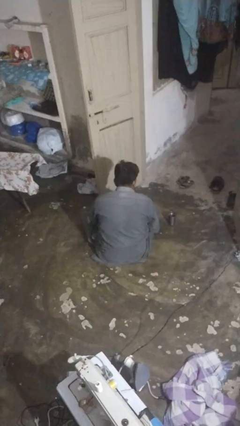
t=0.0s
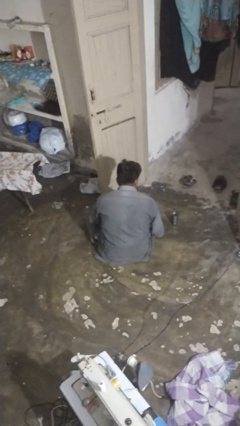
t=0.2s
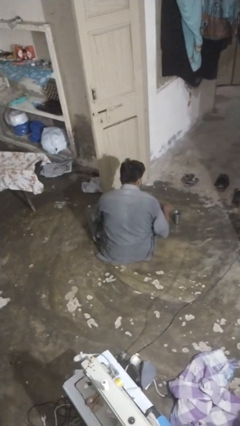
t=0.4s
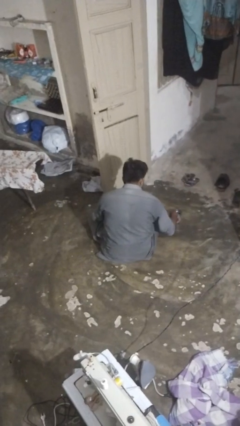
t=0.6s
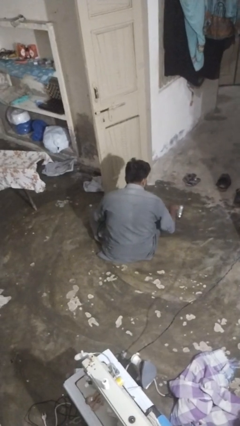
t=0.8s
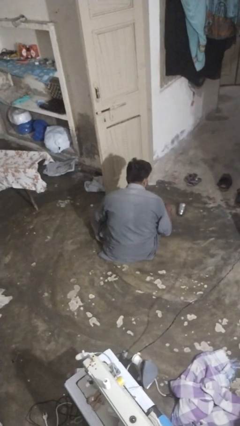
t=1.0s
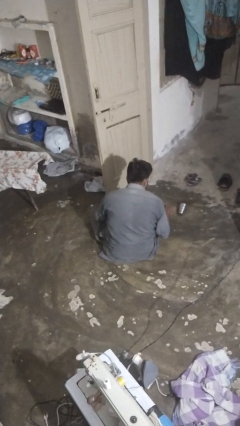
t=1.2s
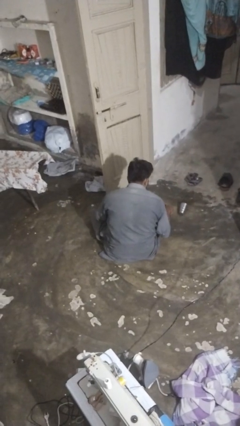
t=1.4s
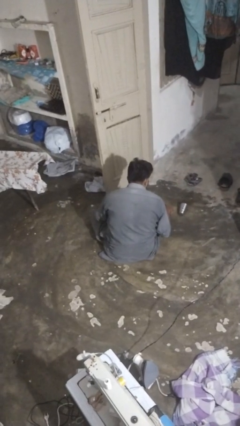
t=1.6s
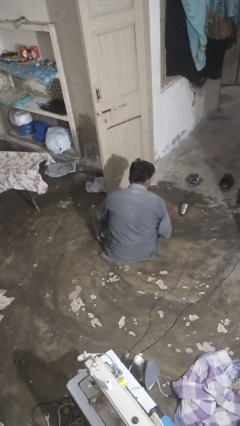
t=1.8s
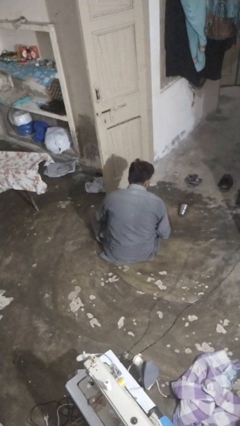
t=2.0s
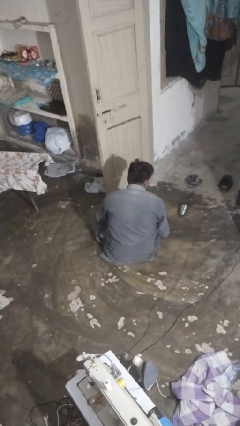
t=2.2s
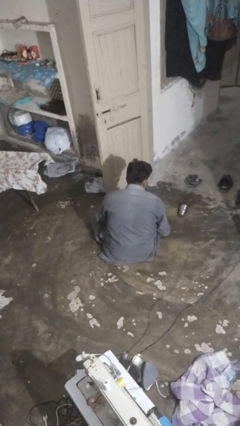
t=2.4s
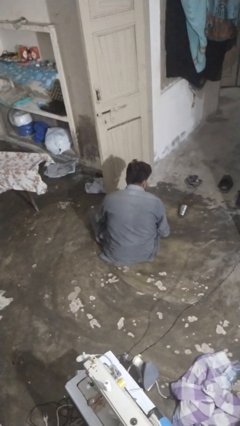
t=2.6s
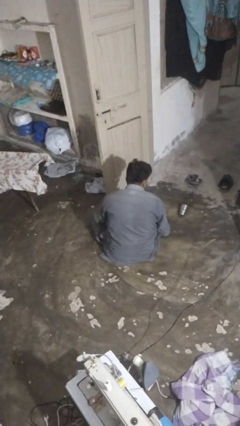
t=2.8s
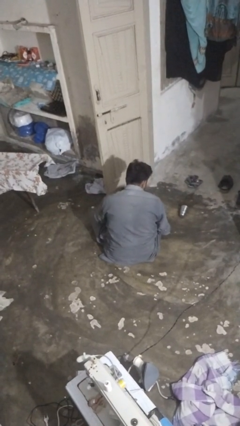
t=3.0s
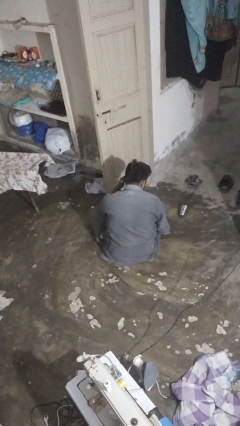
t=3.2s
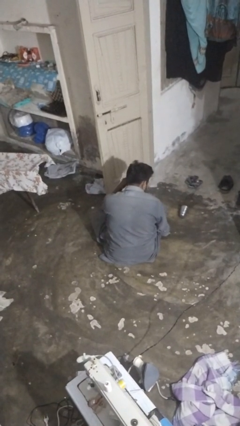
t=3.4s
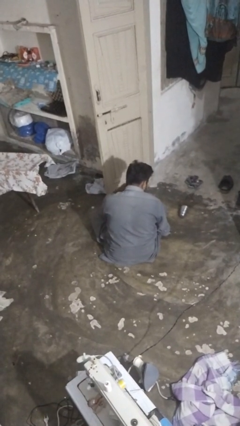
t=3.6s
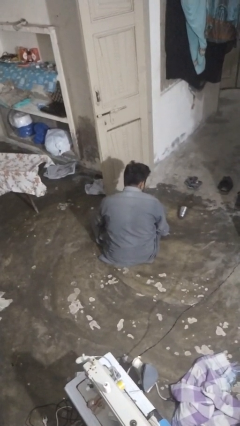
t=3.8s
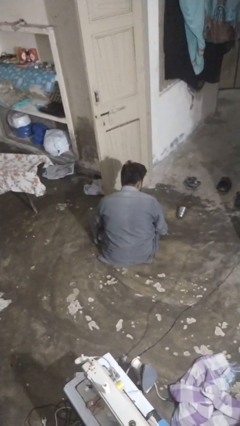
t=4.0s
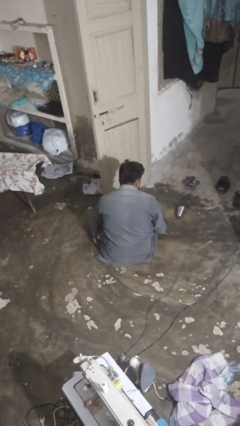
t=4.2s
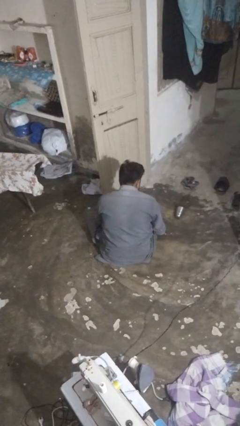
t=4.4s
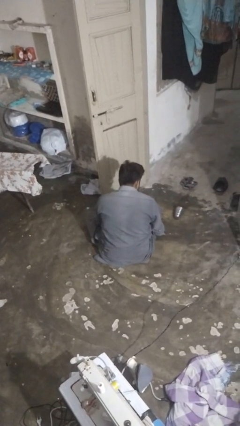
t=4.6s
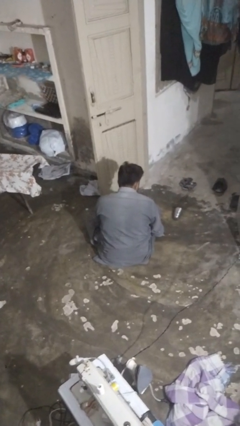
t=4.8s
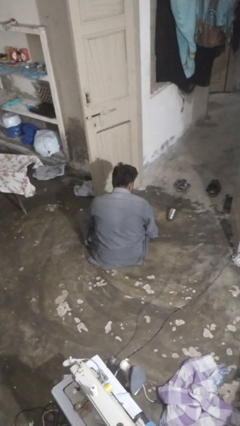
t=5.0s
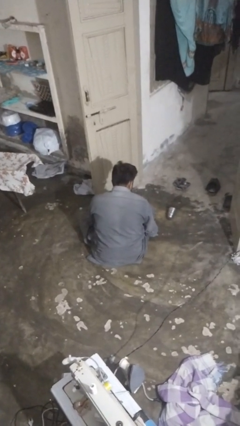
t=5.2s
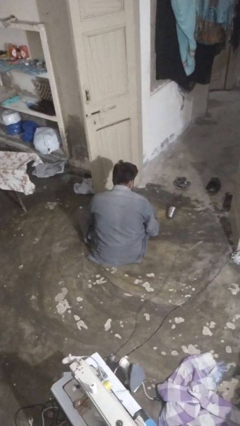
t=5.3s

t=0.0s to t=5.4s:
person spills on floor

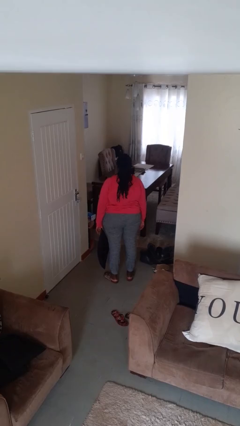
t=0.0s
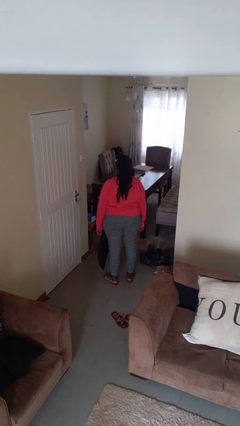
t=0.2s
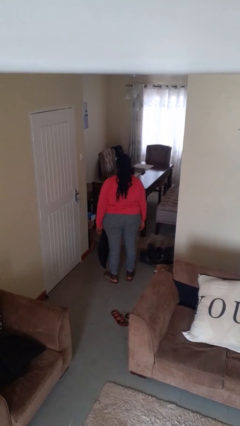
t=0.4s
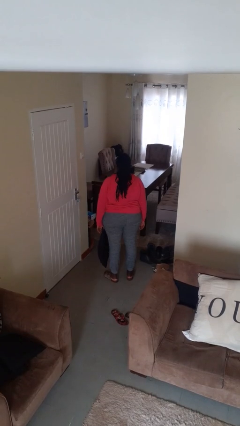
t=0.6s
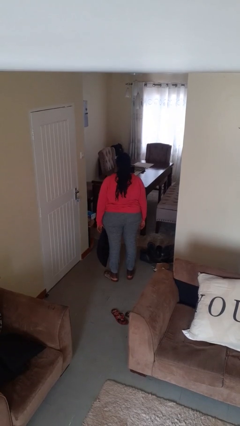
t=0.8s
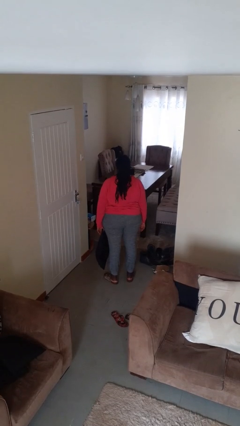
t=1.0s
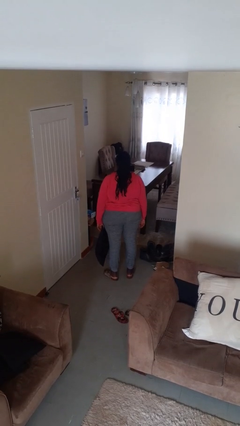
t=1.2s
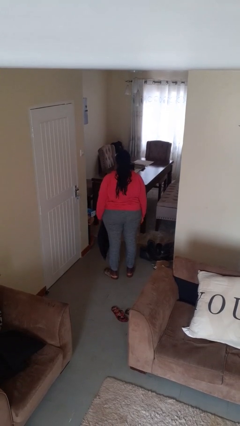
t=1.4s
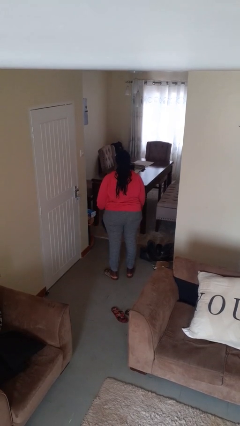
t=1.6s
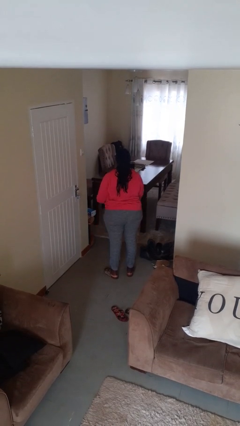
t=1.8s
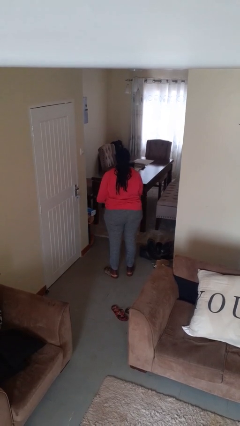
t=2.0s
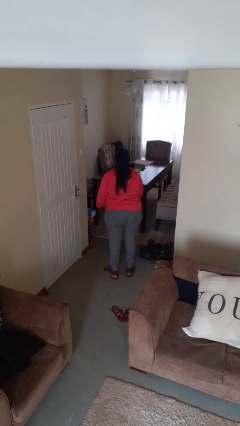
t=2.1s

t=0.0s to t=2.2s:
person throws object into air

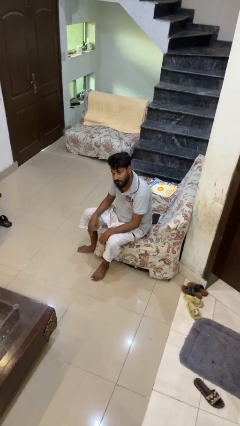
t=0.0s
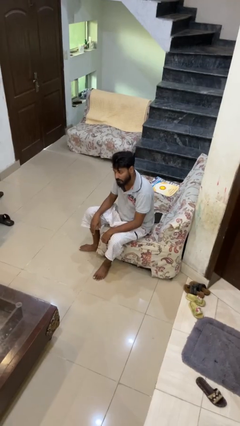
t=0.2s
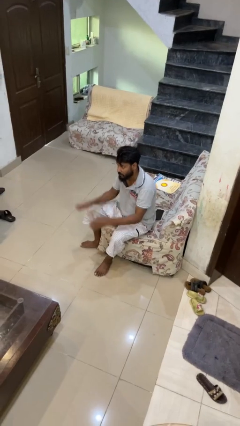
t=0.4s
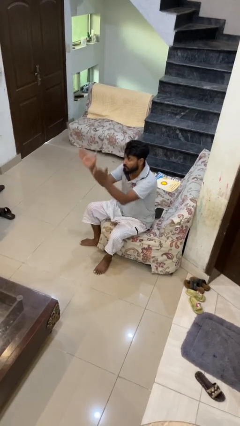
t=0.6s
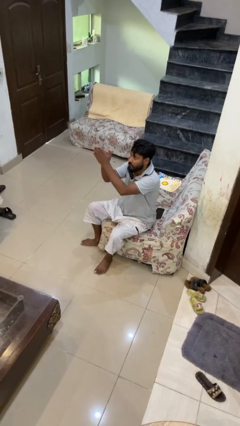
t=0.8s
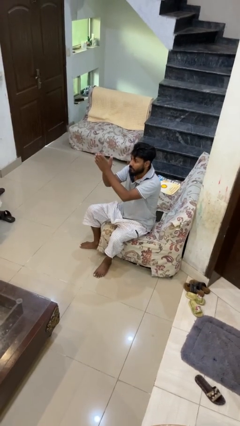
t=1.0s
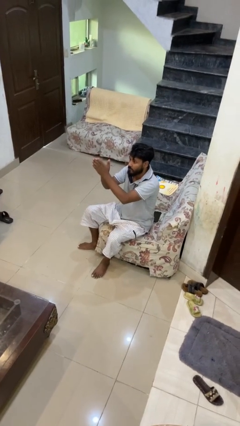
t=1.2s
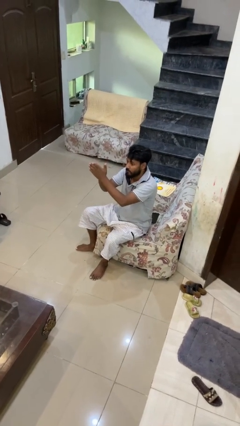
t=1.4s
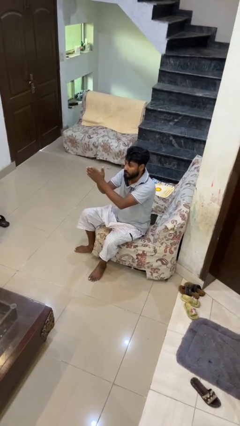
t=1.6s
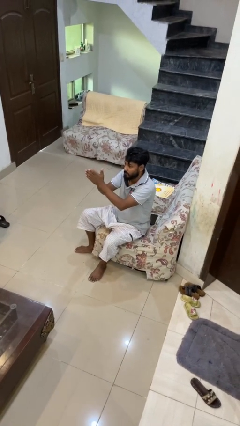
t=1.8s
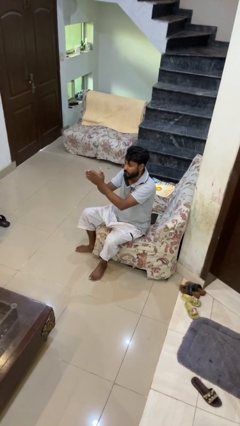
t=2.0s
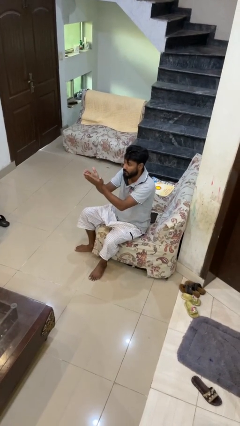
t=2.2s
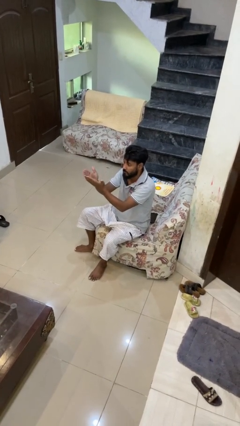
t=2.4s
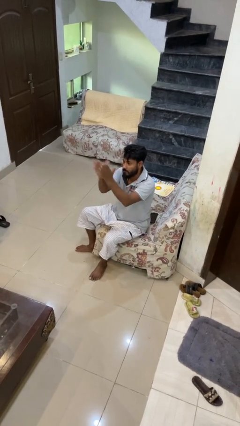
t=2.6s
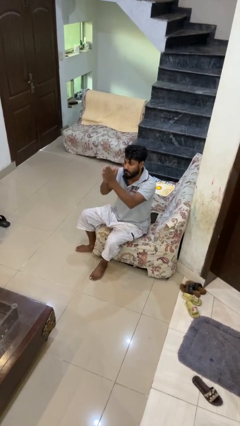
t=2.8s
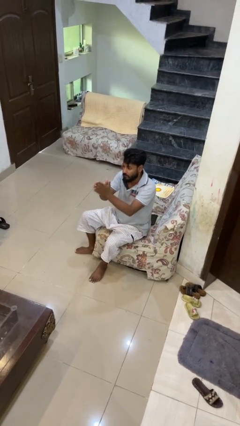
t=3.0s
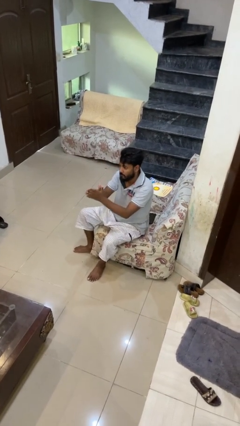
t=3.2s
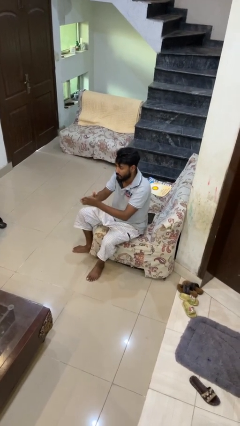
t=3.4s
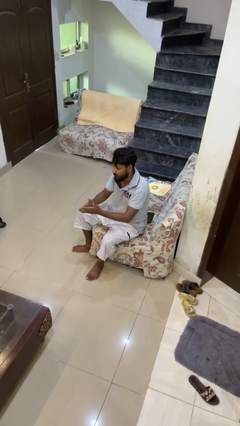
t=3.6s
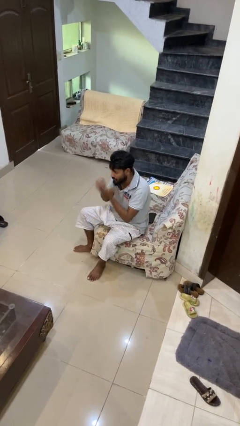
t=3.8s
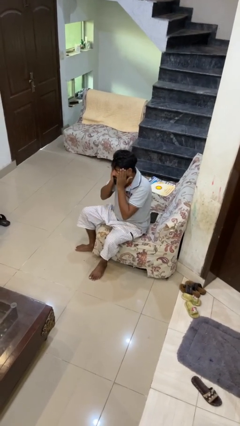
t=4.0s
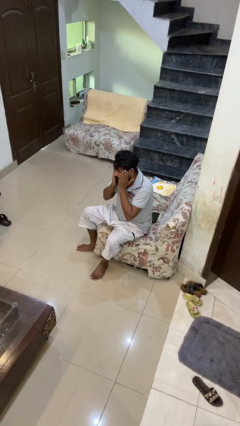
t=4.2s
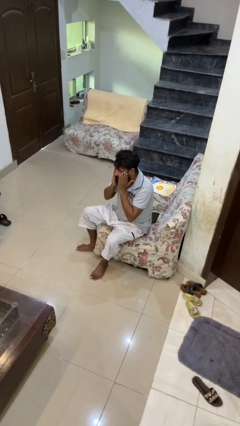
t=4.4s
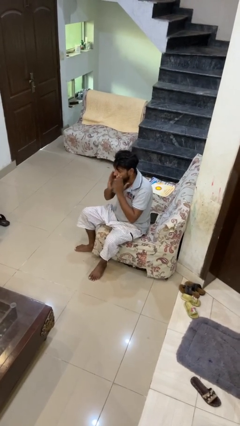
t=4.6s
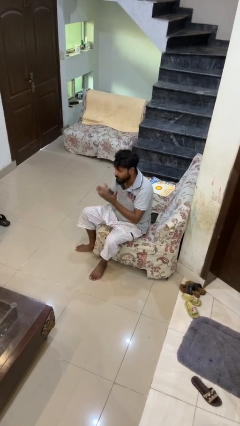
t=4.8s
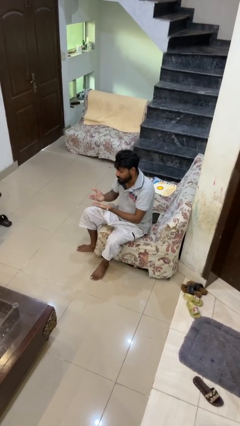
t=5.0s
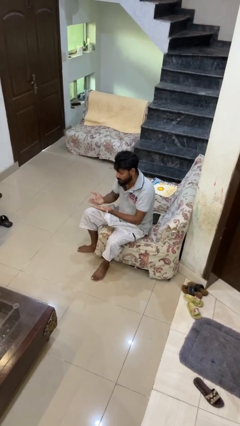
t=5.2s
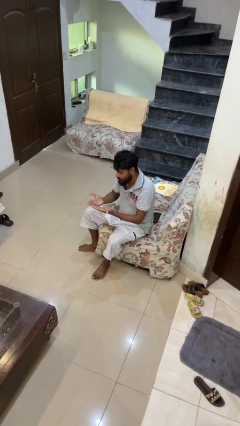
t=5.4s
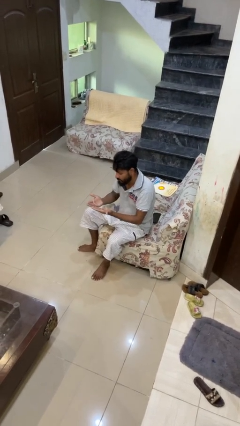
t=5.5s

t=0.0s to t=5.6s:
person swats bug

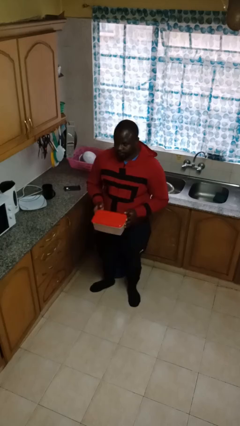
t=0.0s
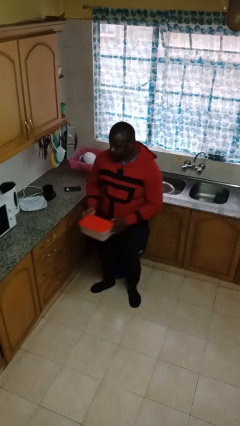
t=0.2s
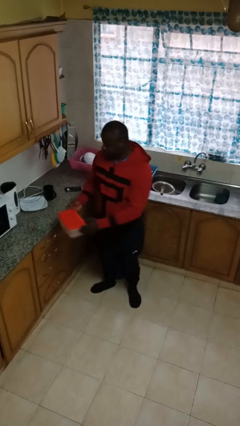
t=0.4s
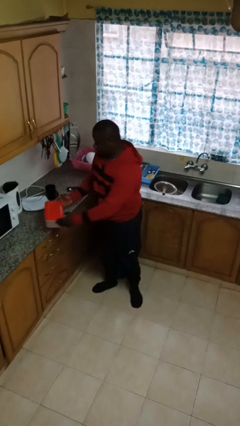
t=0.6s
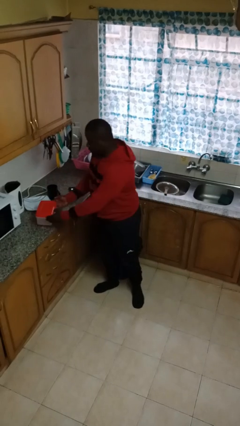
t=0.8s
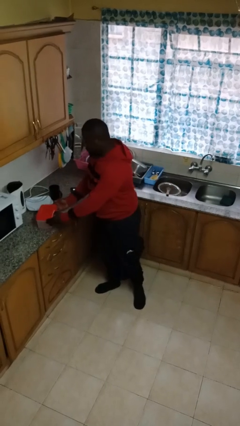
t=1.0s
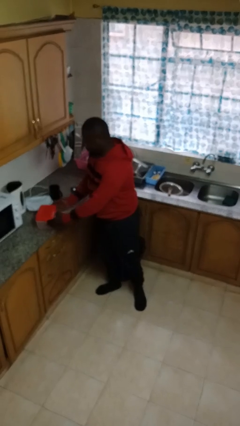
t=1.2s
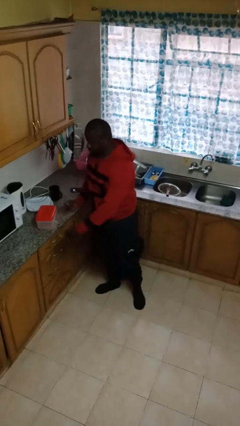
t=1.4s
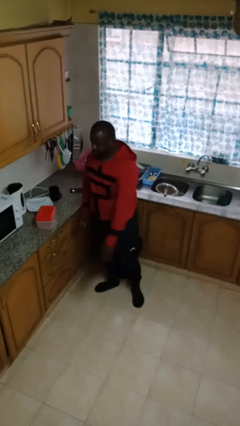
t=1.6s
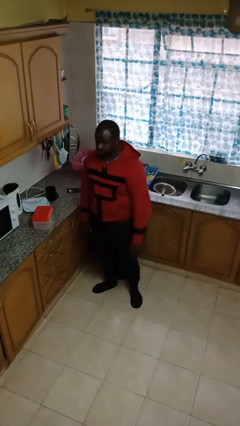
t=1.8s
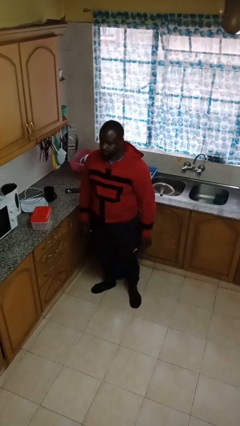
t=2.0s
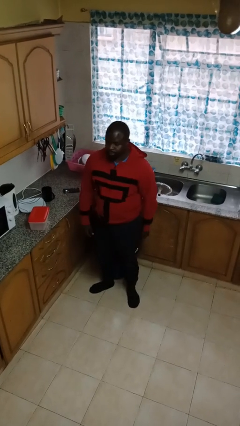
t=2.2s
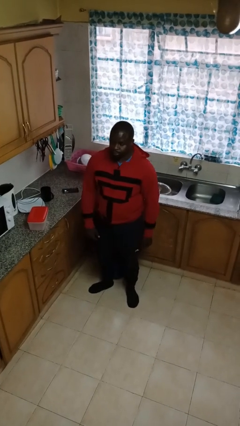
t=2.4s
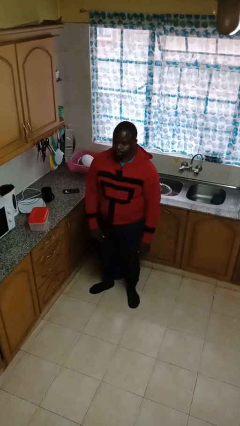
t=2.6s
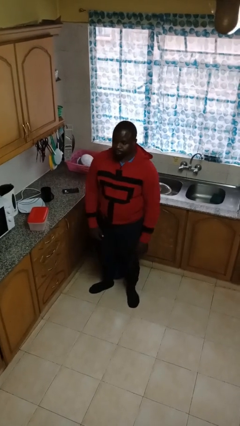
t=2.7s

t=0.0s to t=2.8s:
person puts down object on countertop

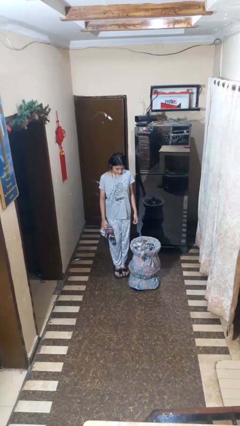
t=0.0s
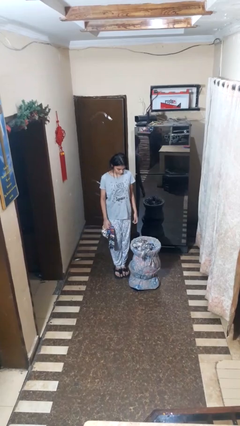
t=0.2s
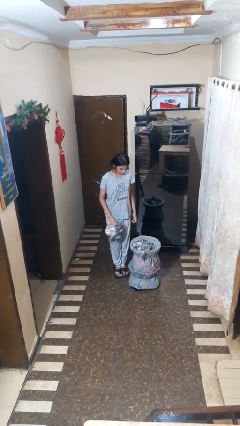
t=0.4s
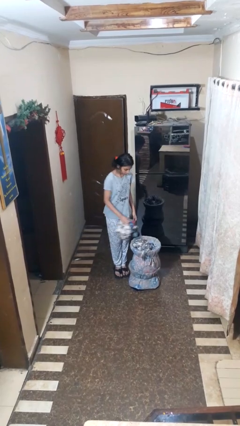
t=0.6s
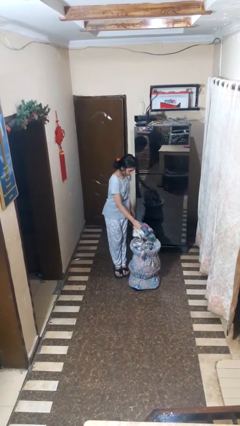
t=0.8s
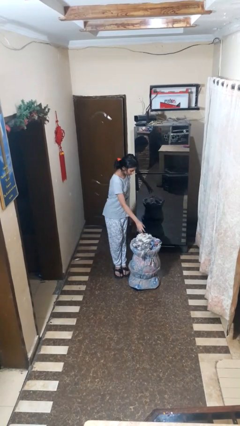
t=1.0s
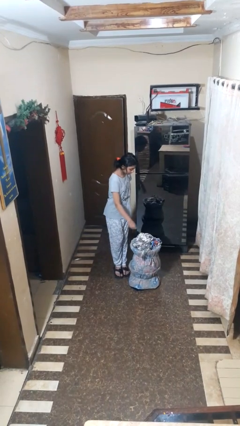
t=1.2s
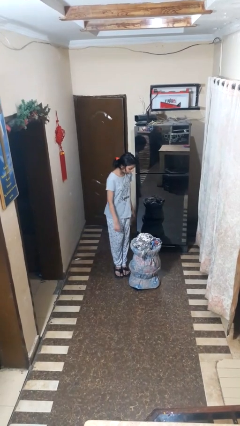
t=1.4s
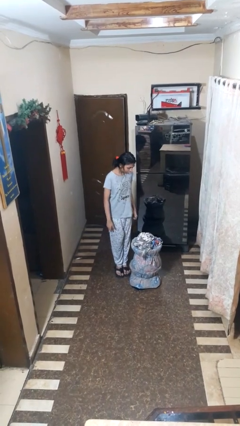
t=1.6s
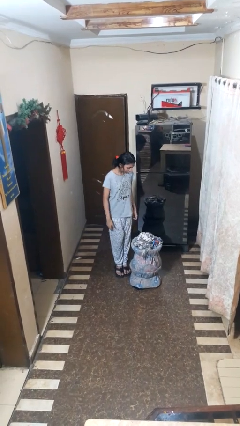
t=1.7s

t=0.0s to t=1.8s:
person takes object from basket
